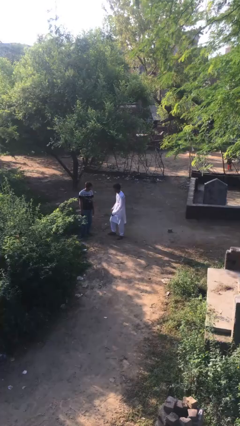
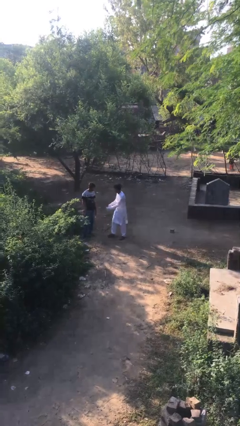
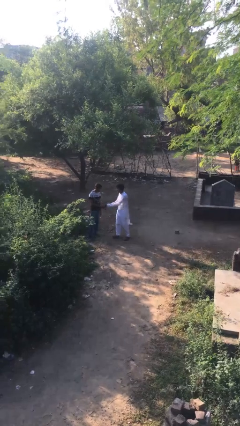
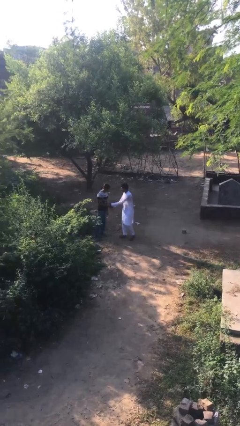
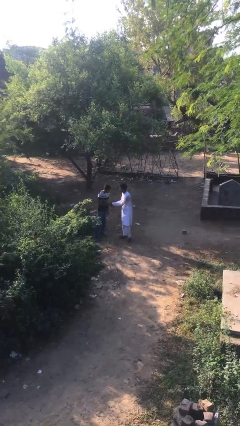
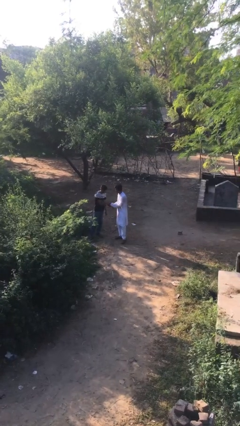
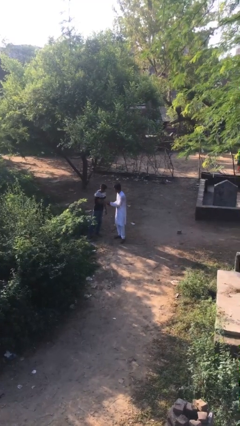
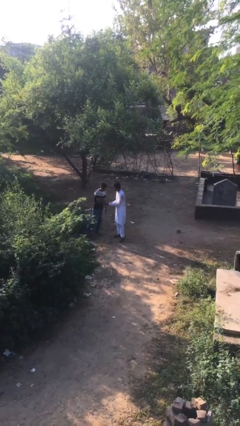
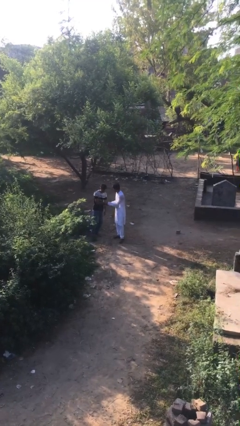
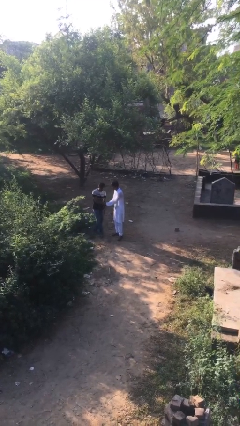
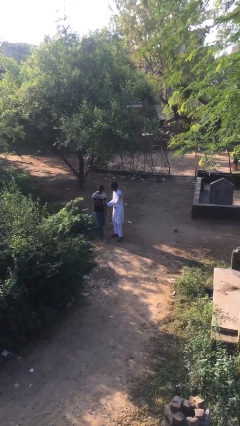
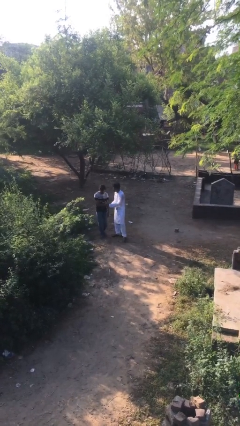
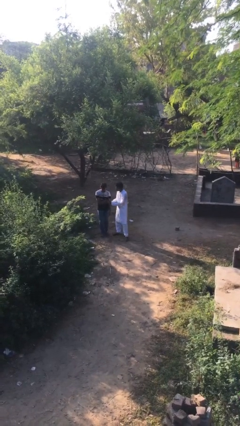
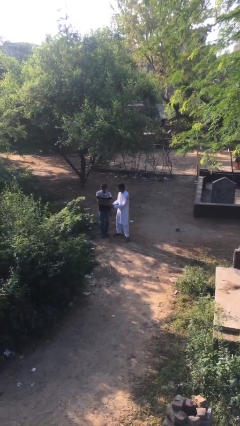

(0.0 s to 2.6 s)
person shakes hand

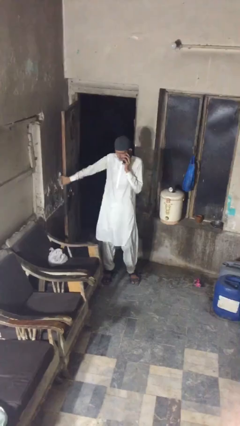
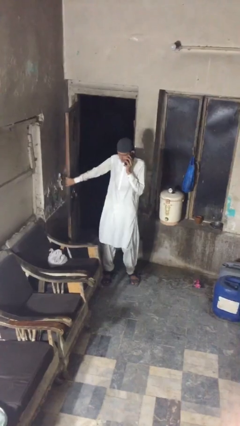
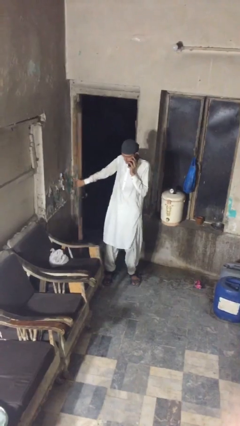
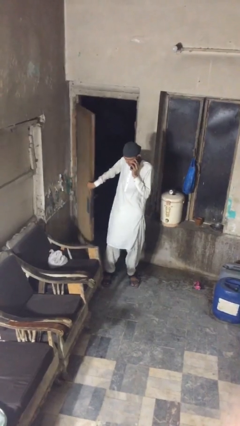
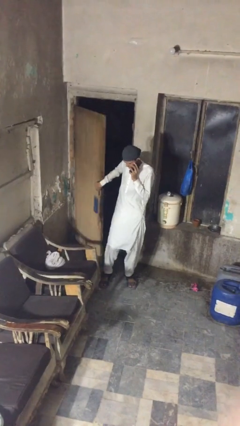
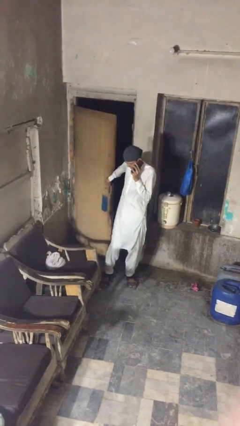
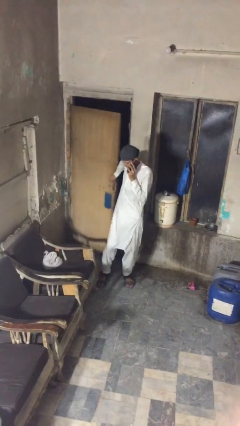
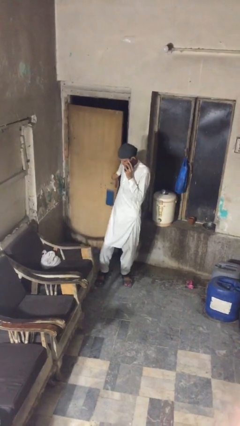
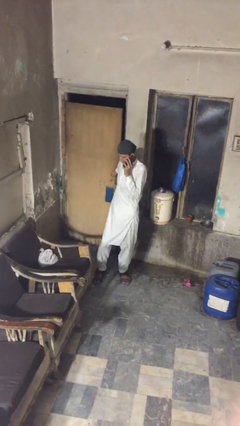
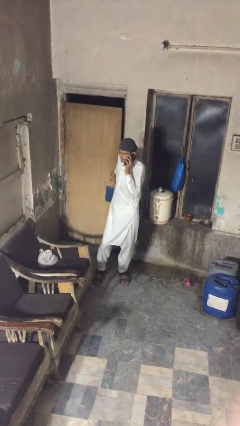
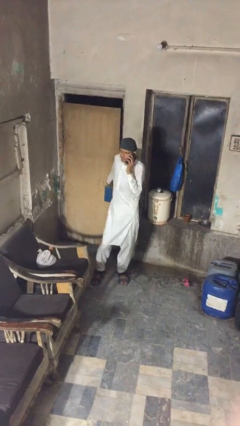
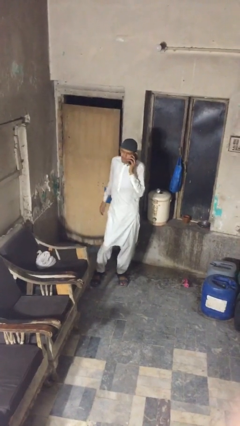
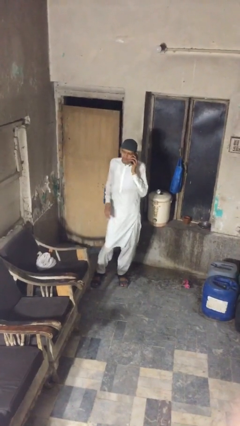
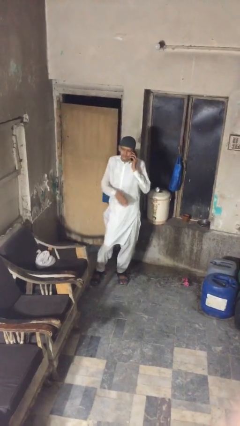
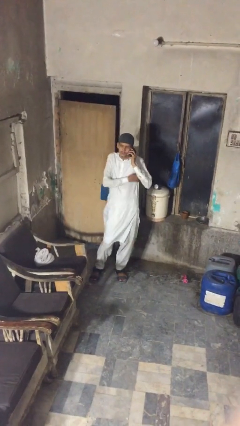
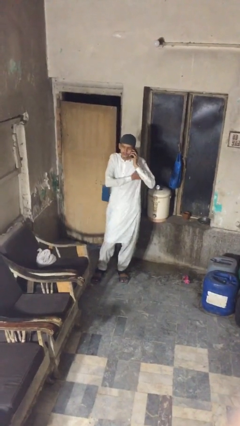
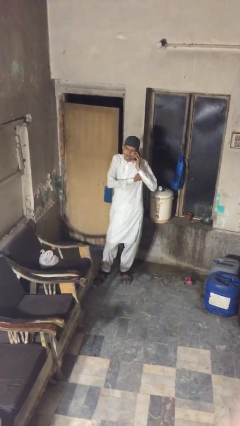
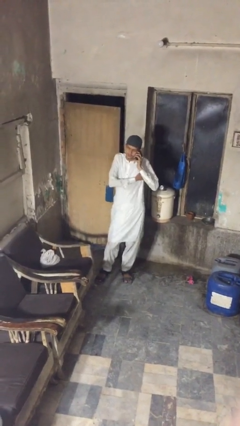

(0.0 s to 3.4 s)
person closes facility door

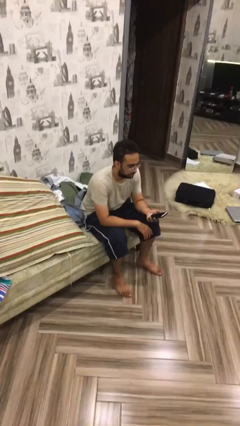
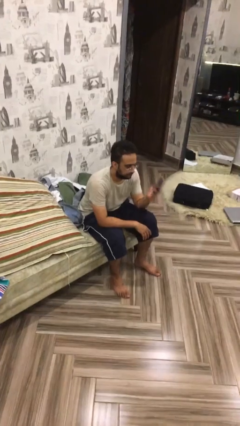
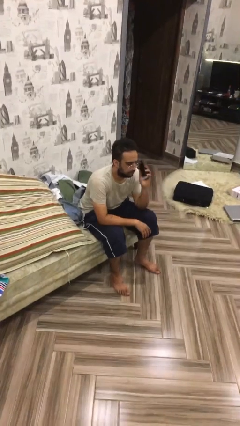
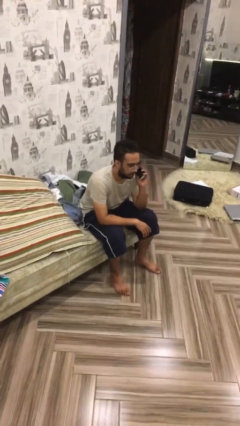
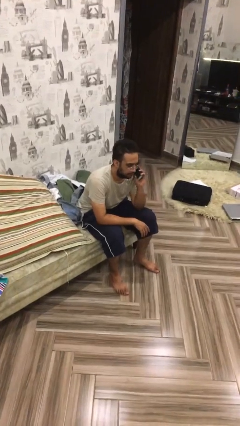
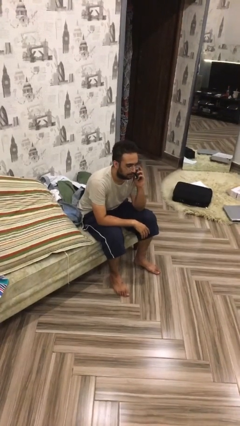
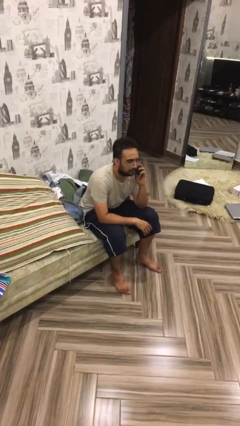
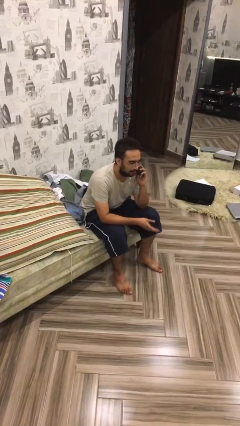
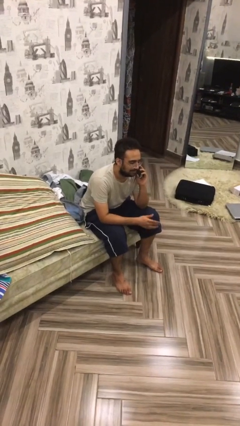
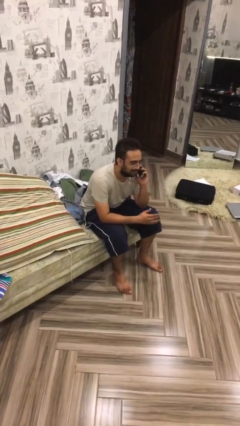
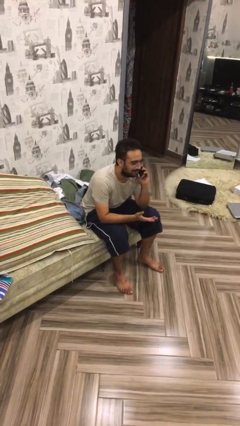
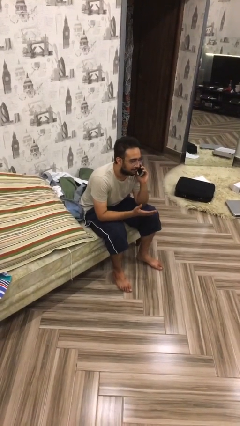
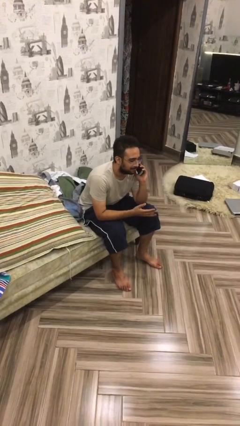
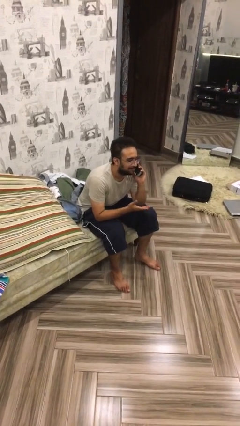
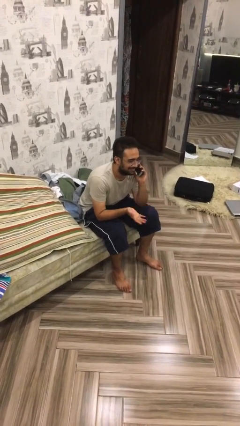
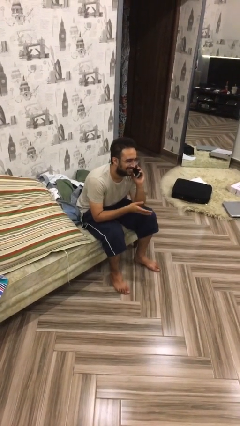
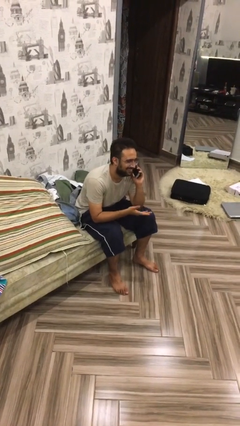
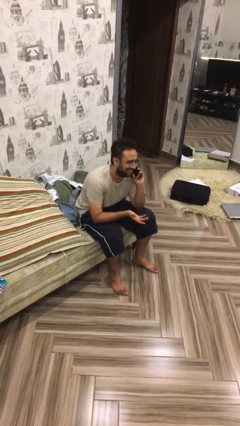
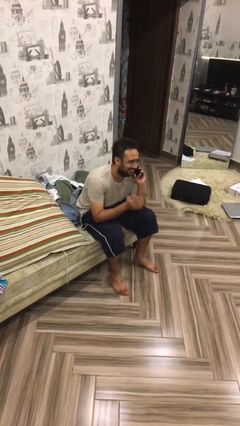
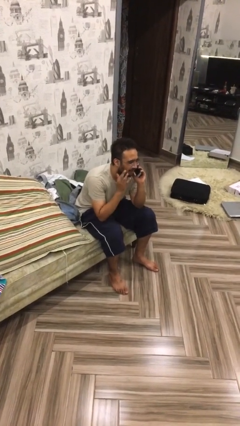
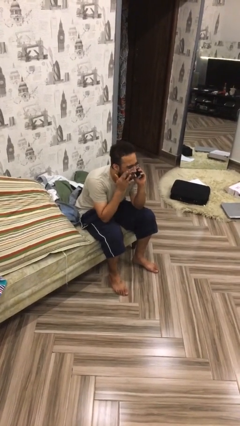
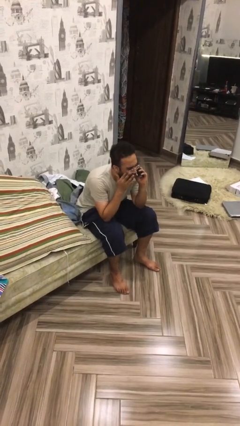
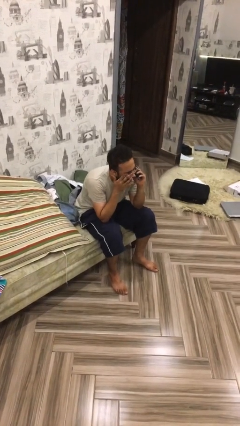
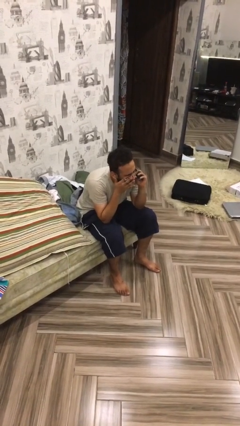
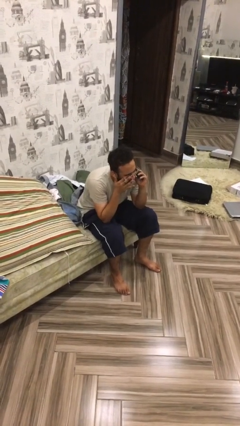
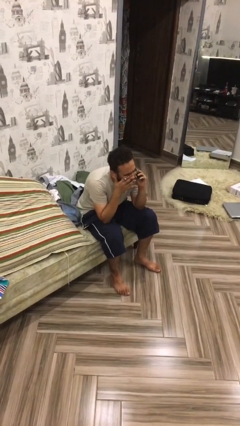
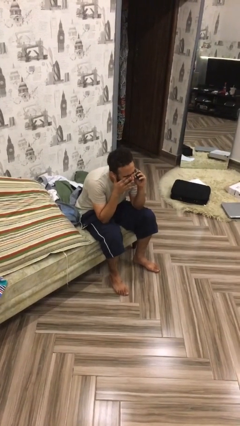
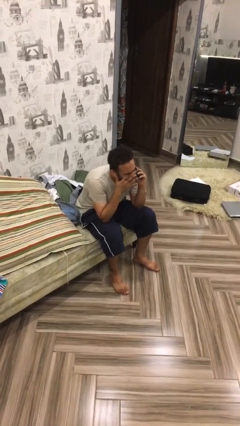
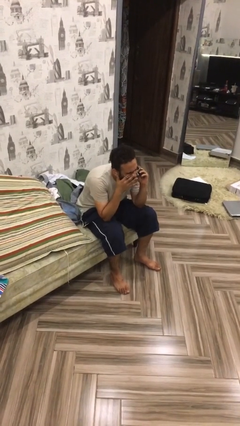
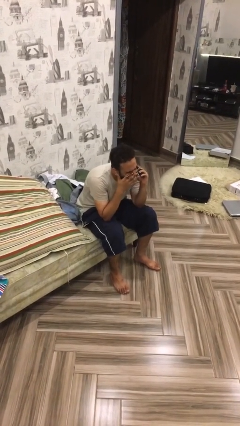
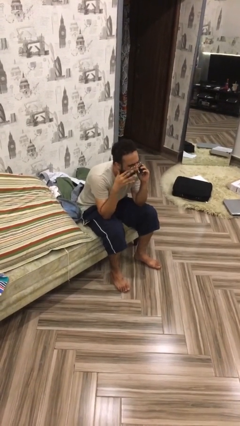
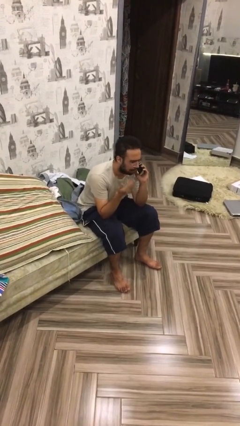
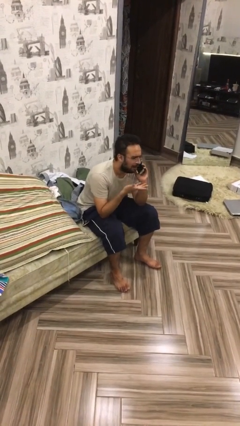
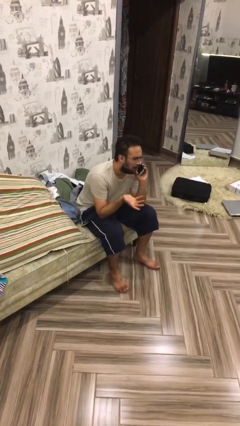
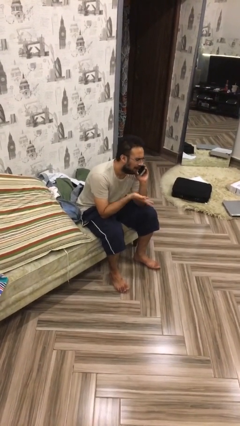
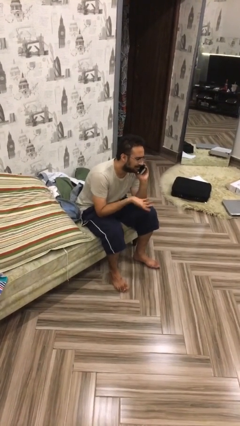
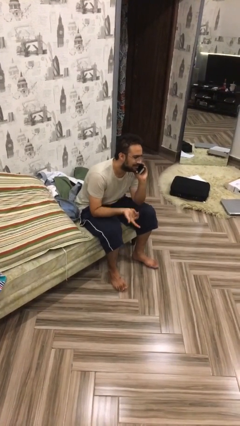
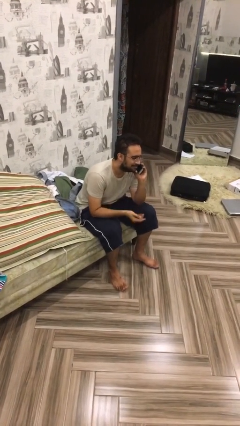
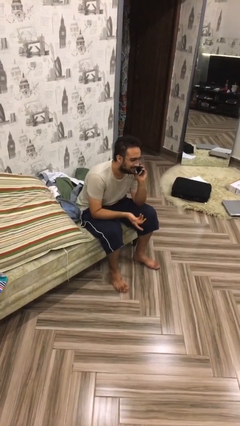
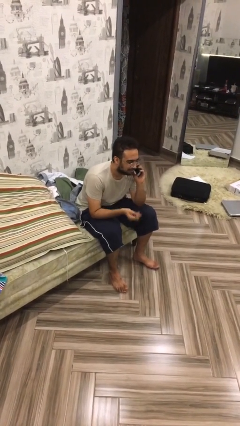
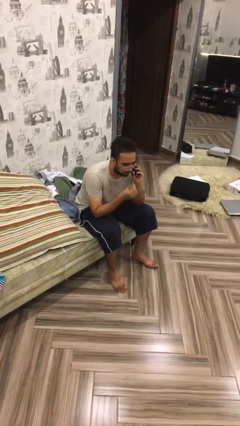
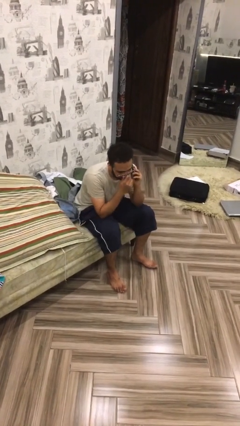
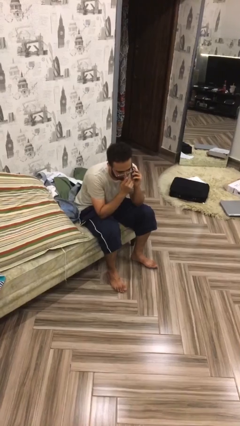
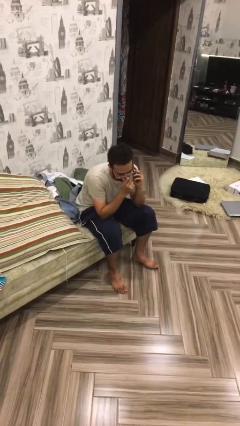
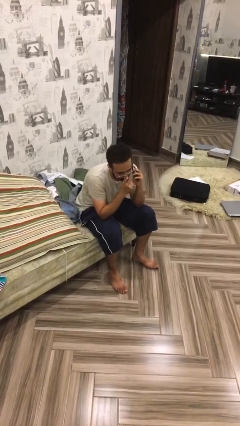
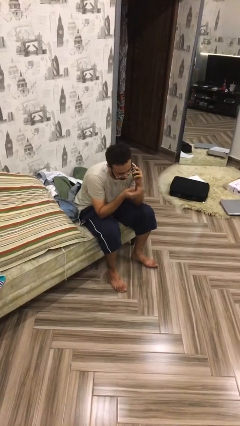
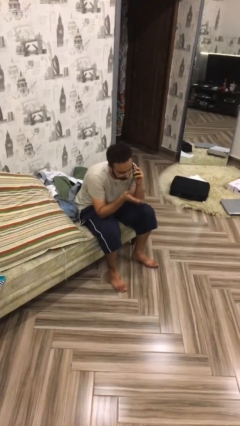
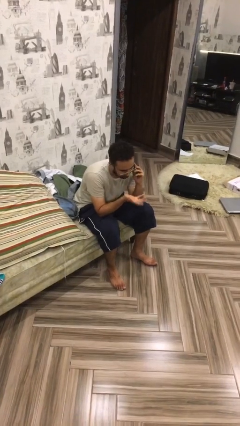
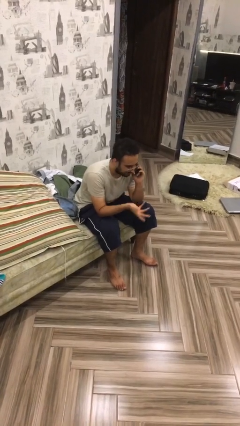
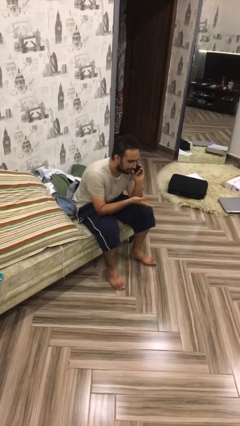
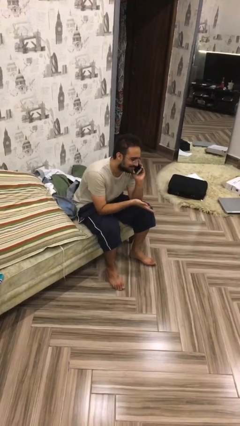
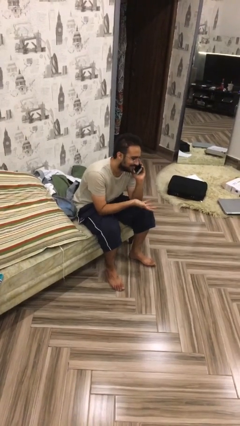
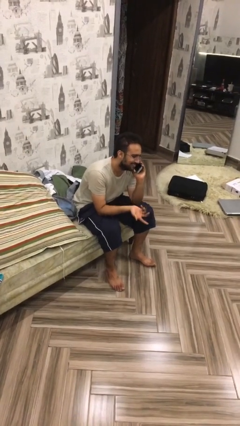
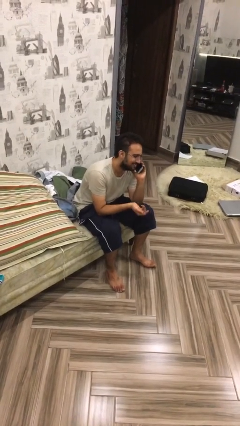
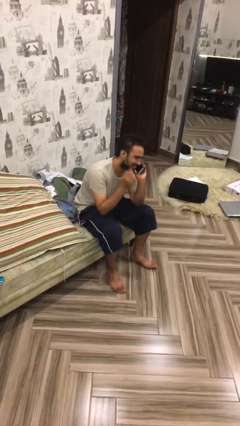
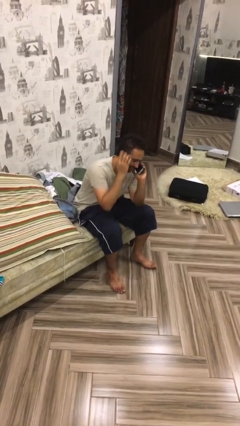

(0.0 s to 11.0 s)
person talks on phone

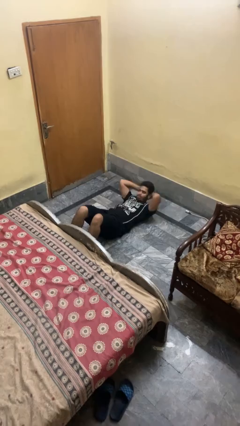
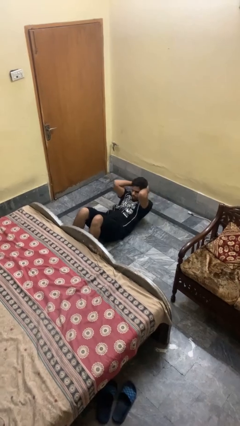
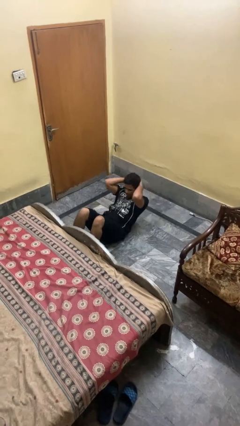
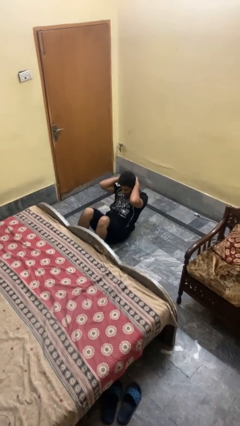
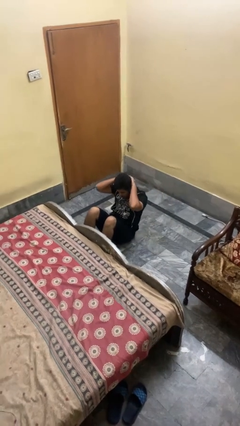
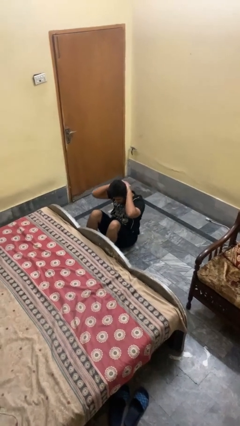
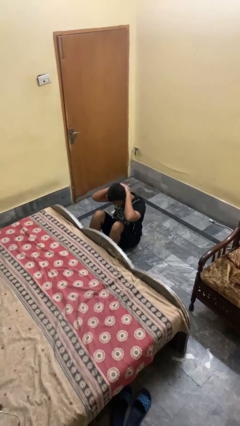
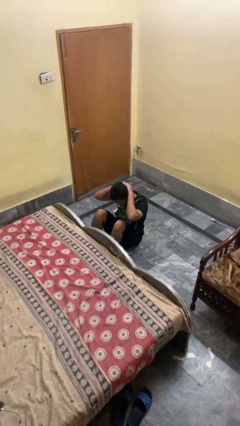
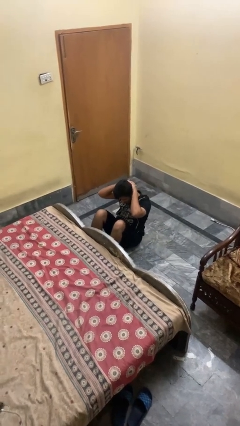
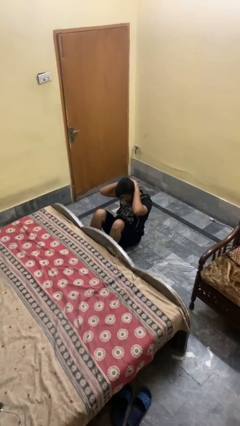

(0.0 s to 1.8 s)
person exercises with situp
